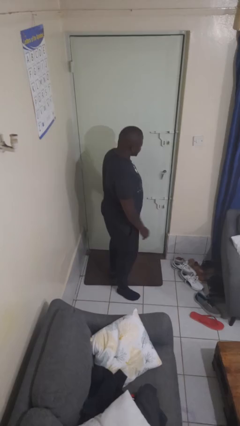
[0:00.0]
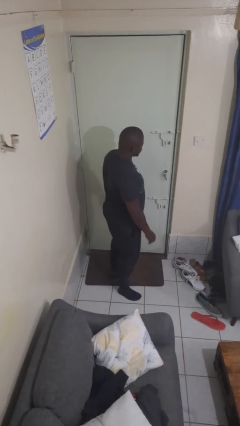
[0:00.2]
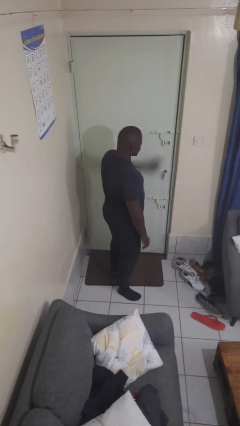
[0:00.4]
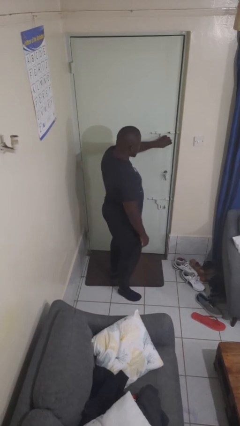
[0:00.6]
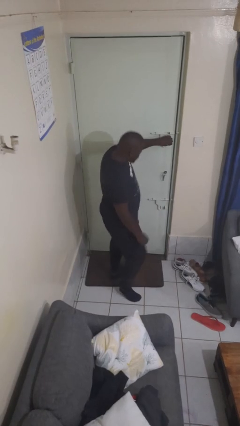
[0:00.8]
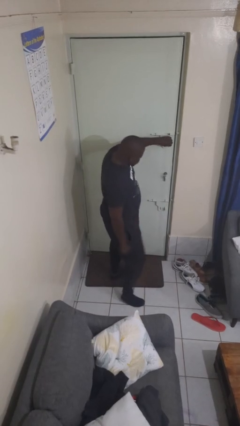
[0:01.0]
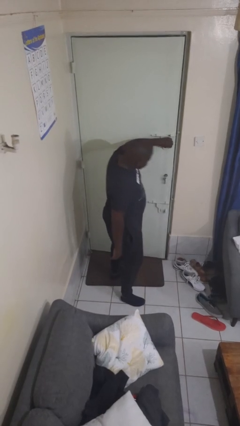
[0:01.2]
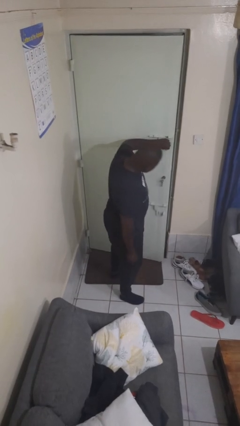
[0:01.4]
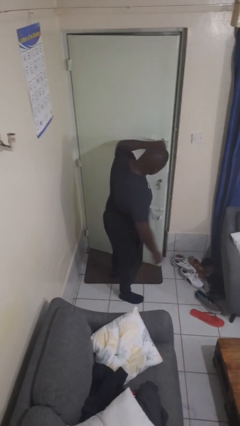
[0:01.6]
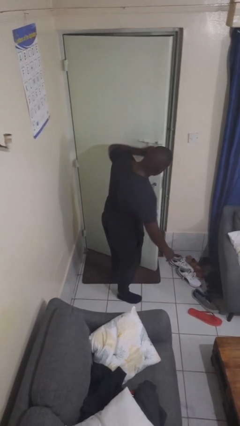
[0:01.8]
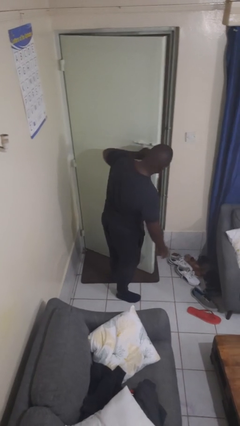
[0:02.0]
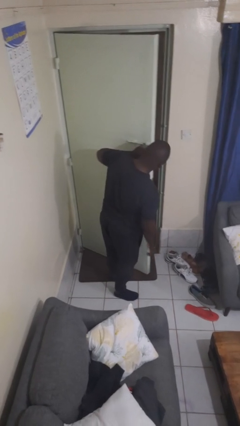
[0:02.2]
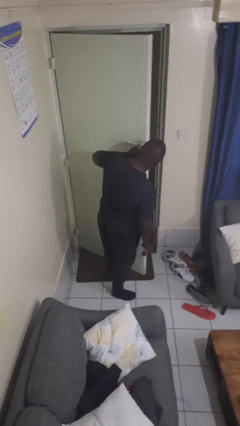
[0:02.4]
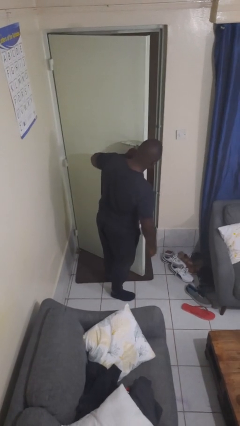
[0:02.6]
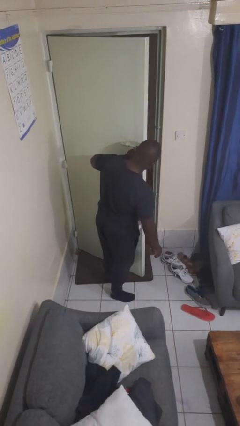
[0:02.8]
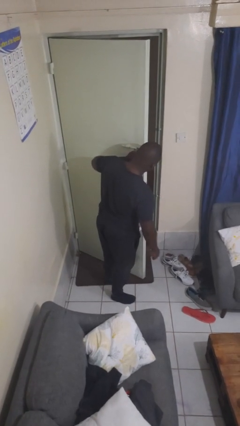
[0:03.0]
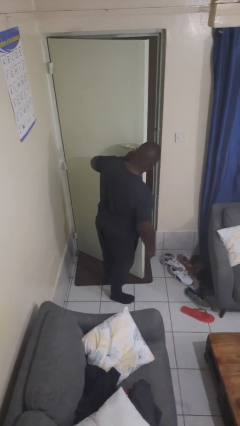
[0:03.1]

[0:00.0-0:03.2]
person opens facility door

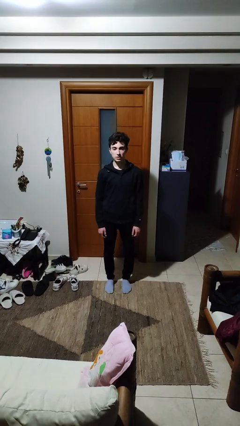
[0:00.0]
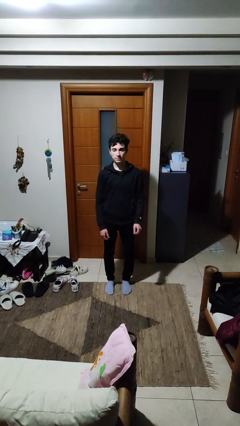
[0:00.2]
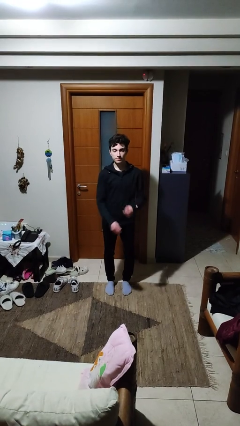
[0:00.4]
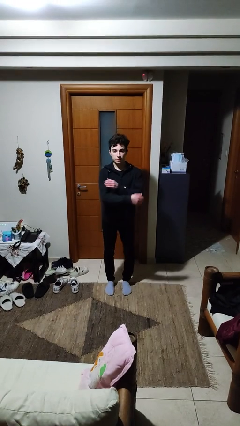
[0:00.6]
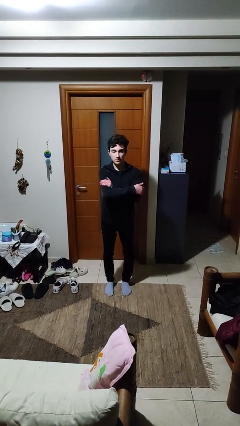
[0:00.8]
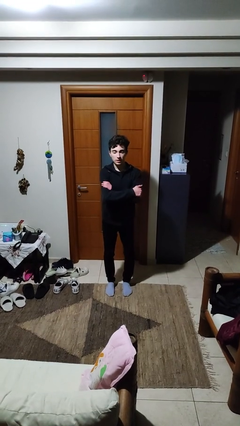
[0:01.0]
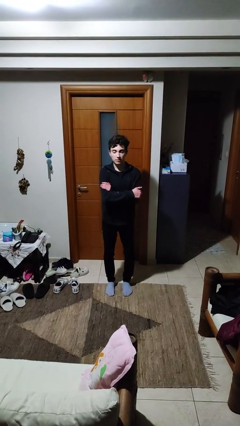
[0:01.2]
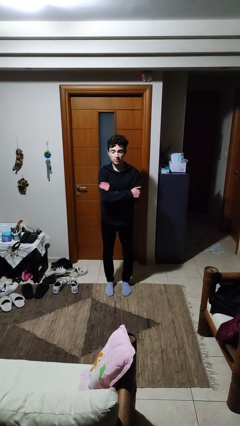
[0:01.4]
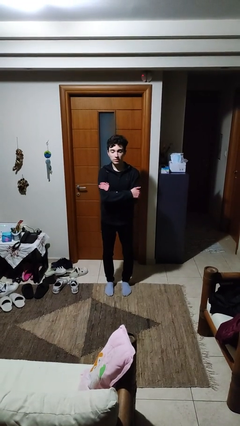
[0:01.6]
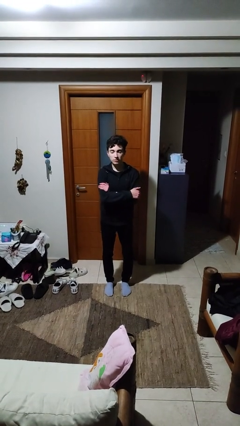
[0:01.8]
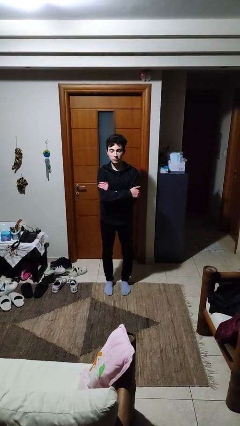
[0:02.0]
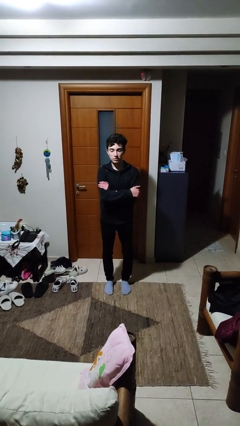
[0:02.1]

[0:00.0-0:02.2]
person crosses arms

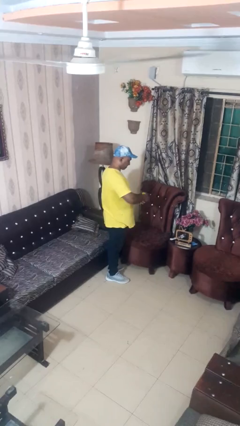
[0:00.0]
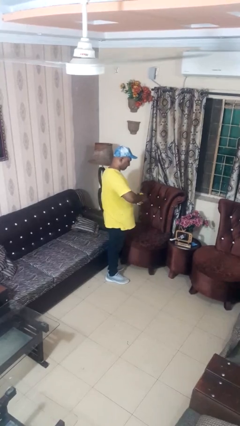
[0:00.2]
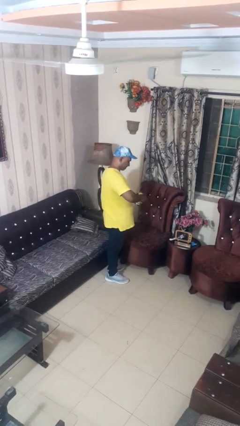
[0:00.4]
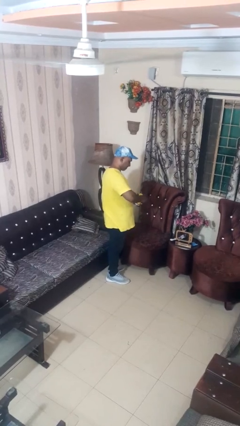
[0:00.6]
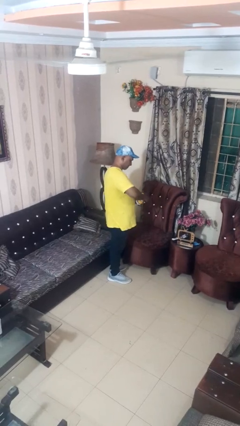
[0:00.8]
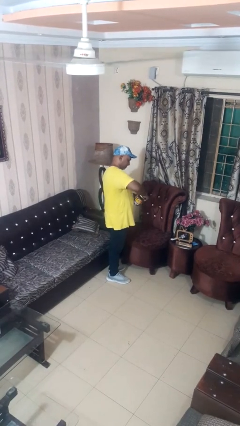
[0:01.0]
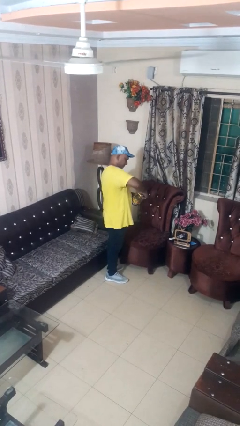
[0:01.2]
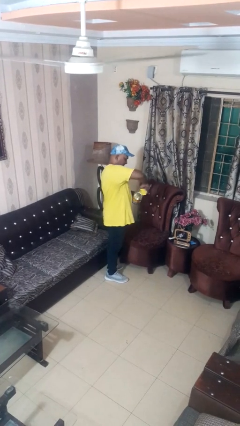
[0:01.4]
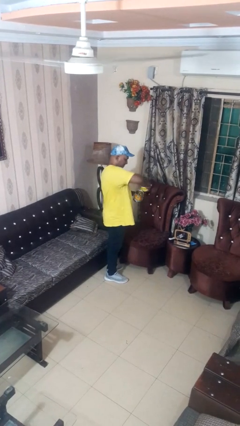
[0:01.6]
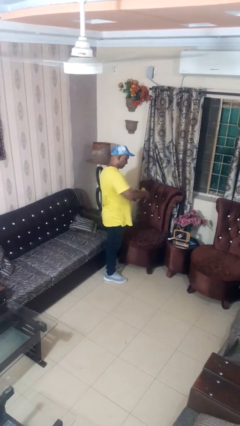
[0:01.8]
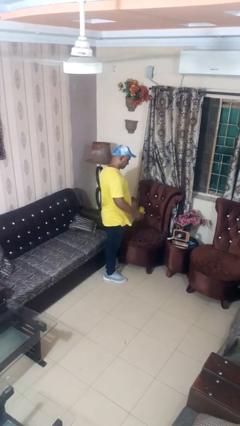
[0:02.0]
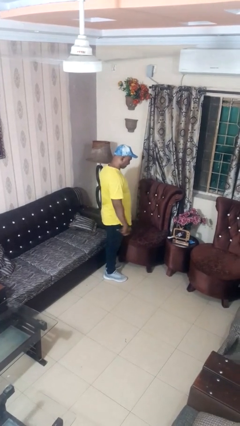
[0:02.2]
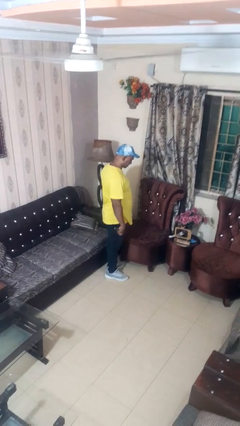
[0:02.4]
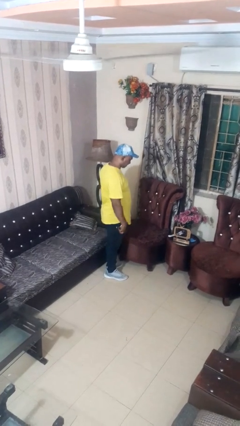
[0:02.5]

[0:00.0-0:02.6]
person opens can with can opener

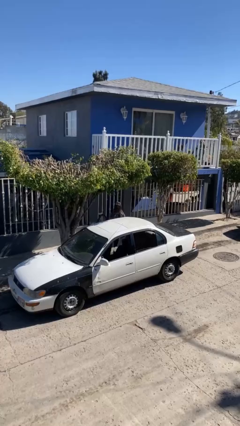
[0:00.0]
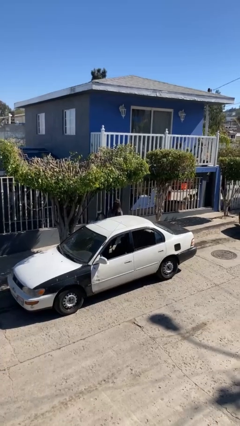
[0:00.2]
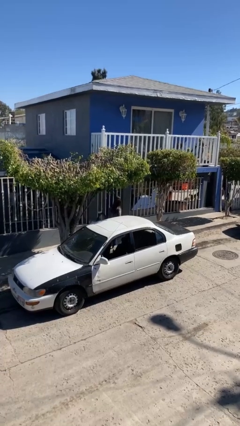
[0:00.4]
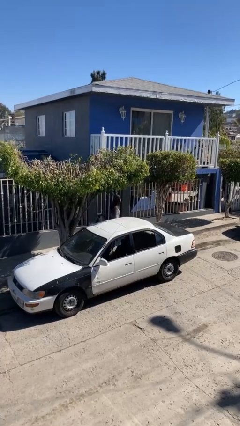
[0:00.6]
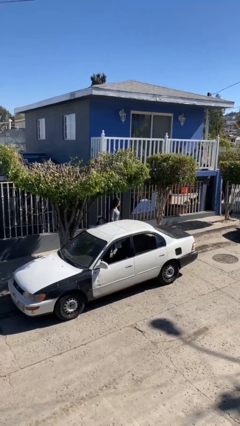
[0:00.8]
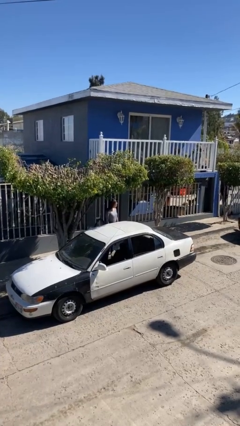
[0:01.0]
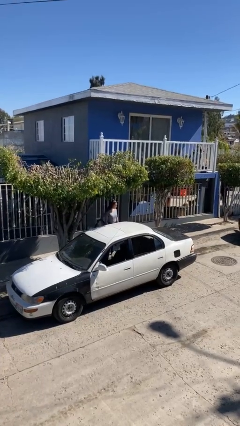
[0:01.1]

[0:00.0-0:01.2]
person exits car

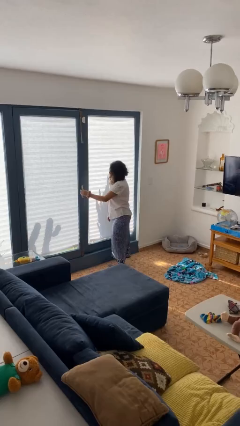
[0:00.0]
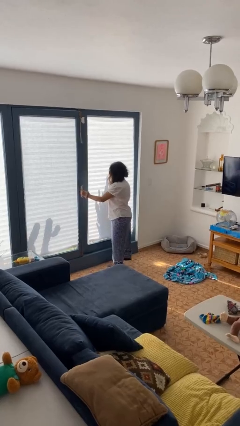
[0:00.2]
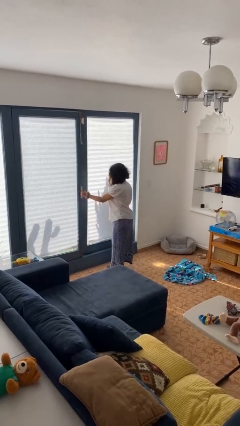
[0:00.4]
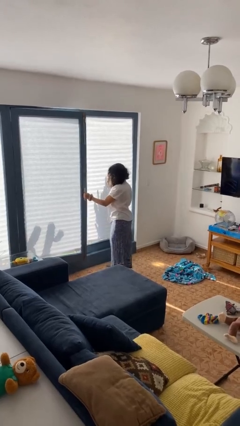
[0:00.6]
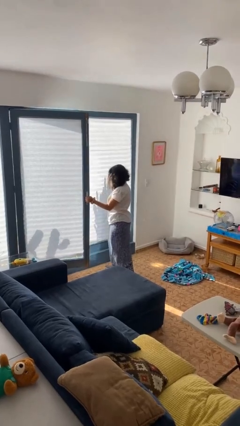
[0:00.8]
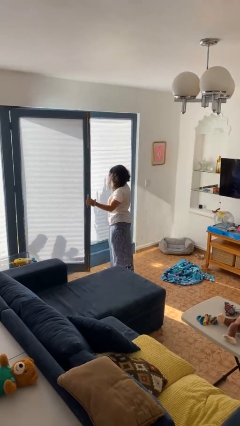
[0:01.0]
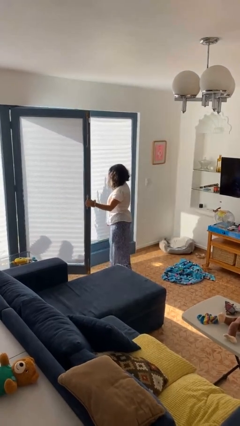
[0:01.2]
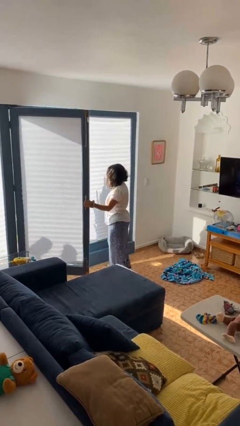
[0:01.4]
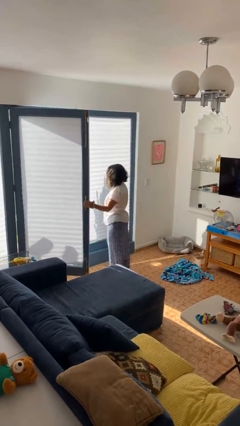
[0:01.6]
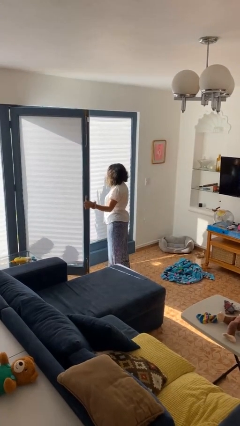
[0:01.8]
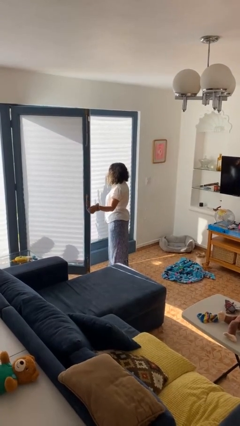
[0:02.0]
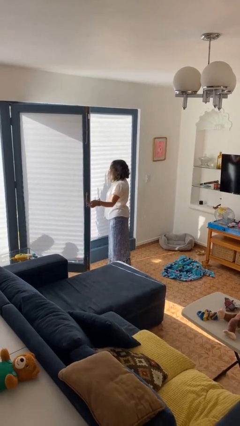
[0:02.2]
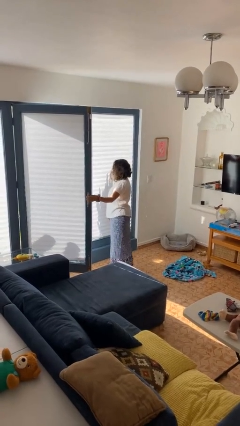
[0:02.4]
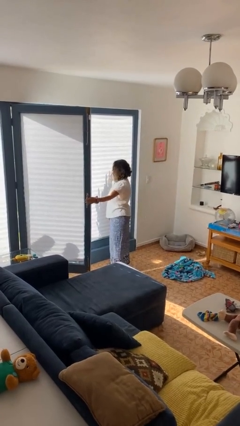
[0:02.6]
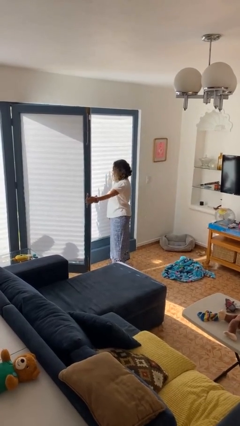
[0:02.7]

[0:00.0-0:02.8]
person opens home window

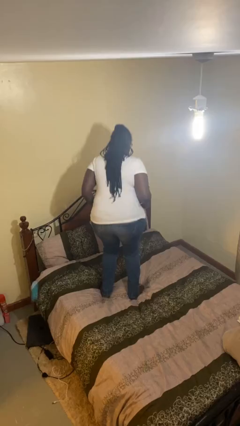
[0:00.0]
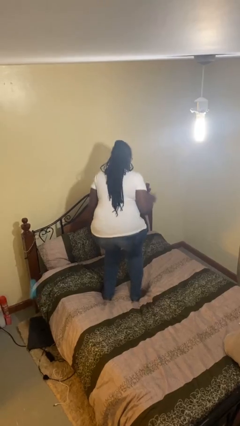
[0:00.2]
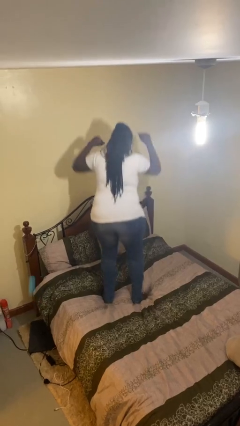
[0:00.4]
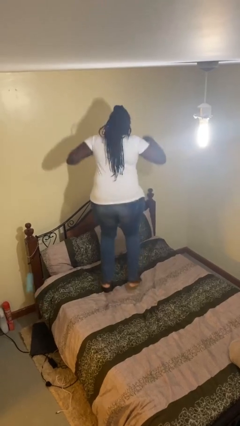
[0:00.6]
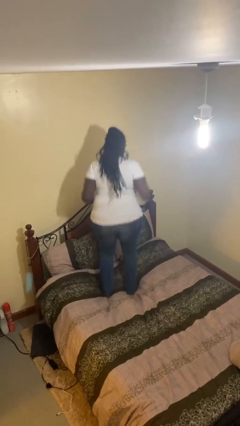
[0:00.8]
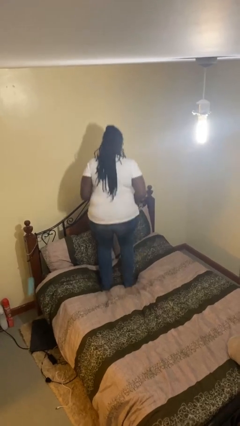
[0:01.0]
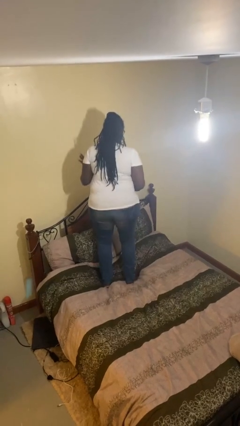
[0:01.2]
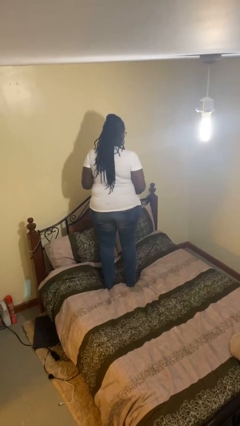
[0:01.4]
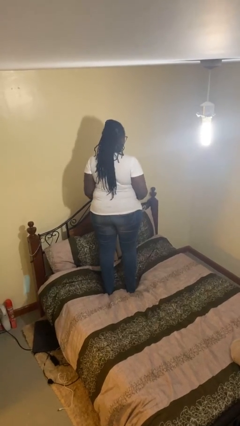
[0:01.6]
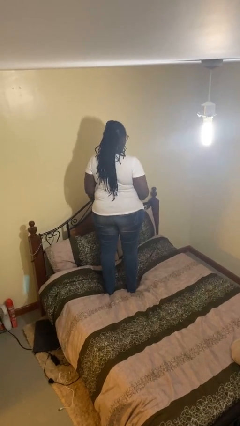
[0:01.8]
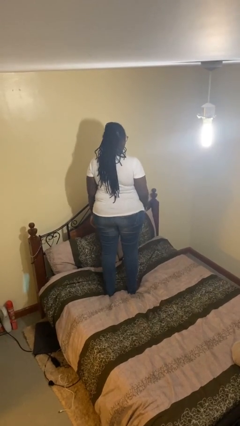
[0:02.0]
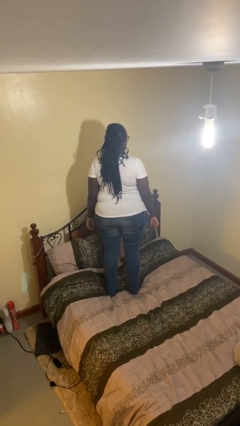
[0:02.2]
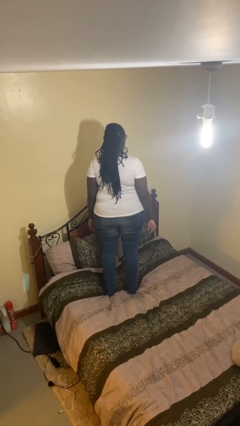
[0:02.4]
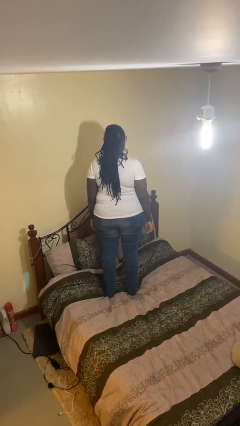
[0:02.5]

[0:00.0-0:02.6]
person jumps on bed

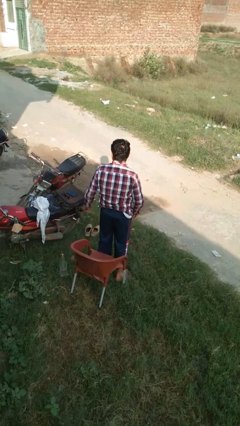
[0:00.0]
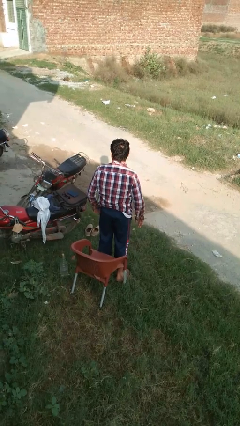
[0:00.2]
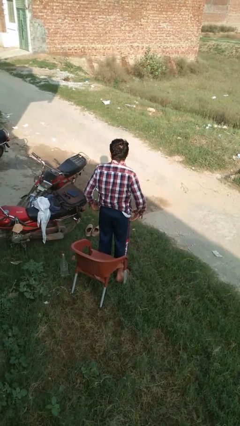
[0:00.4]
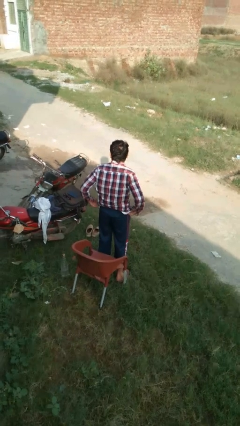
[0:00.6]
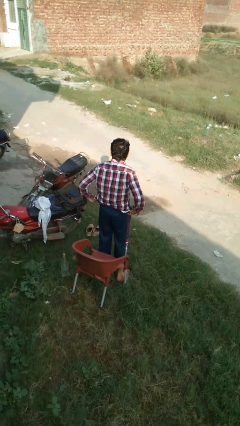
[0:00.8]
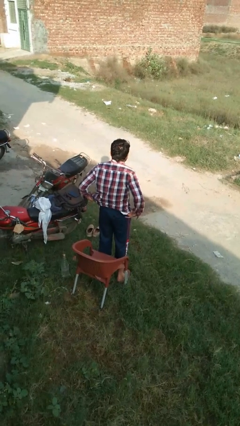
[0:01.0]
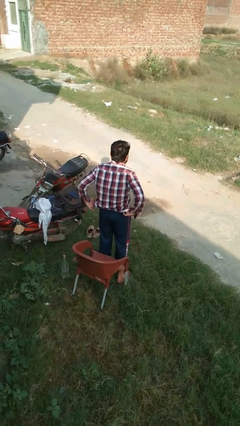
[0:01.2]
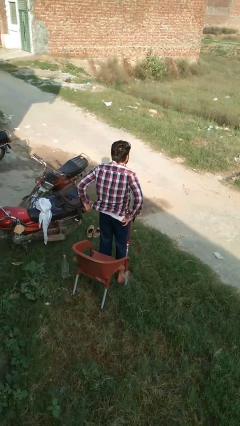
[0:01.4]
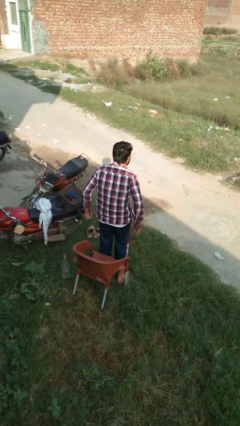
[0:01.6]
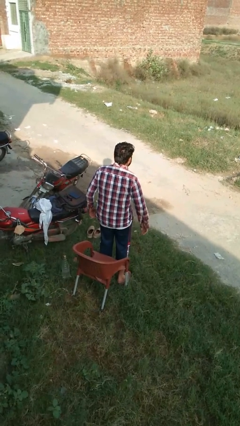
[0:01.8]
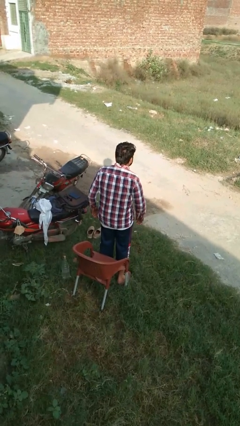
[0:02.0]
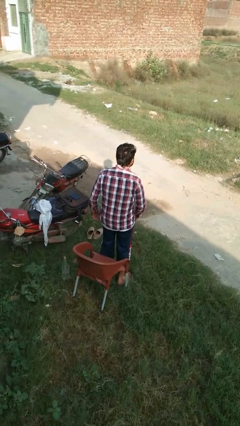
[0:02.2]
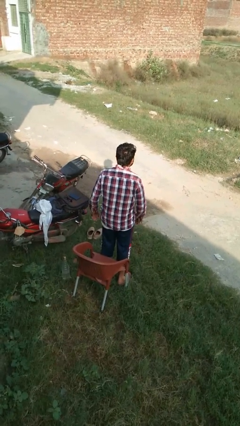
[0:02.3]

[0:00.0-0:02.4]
person untucks shirt
